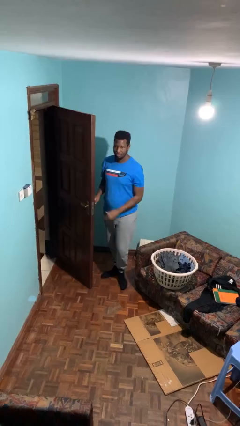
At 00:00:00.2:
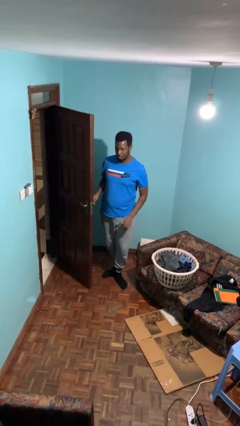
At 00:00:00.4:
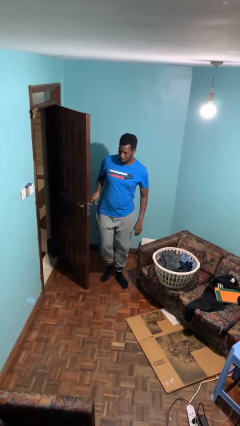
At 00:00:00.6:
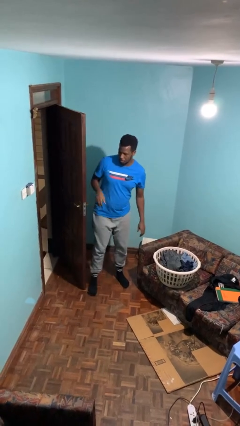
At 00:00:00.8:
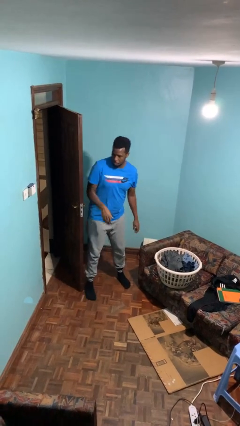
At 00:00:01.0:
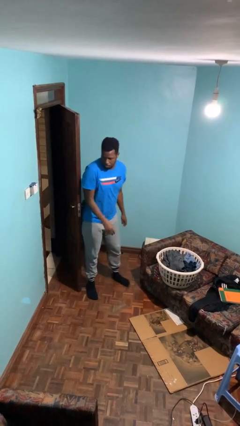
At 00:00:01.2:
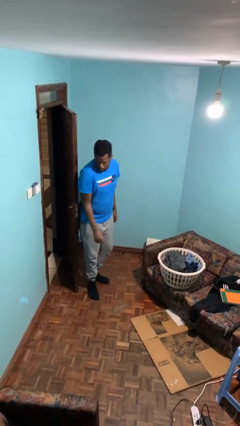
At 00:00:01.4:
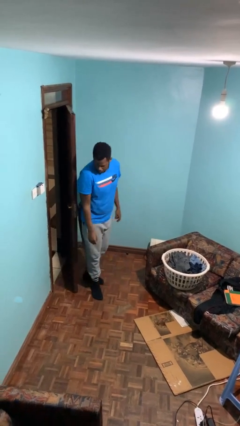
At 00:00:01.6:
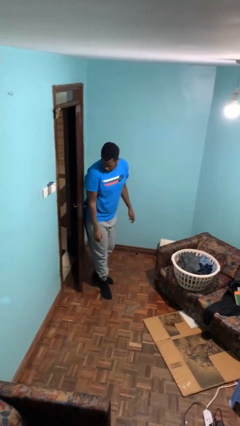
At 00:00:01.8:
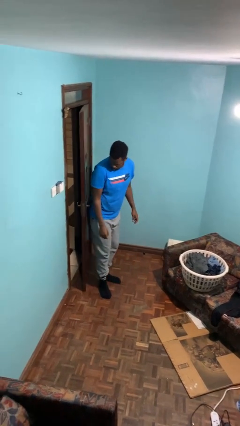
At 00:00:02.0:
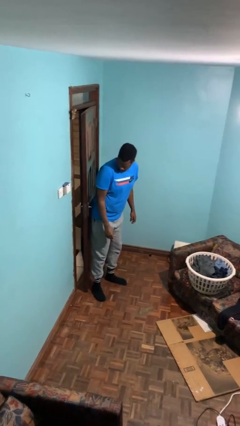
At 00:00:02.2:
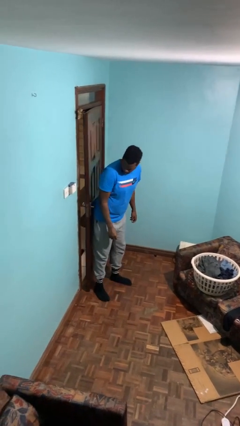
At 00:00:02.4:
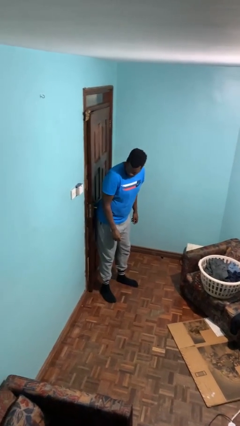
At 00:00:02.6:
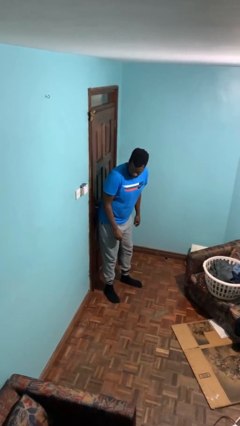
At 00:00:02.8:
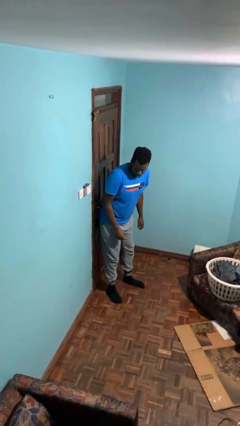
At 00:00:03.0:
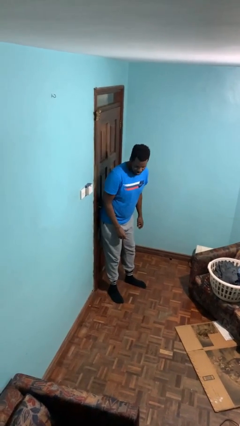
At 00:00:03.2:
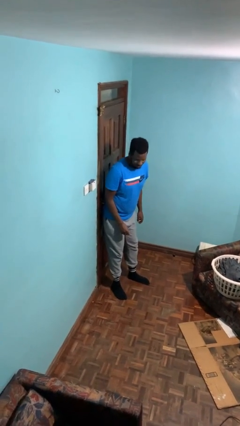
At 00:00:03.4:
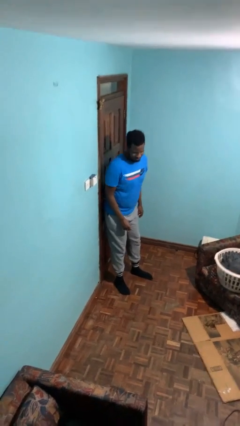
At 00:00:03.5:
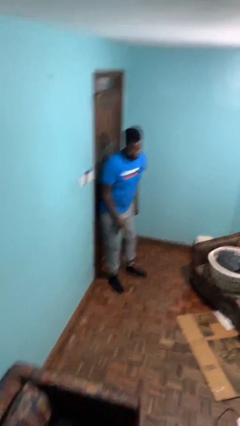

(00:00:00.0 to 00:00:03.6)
person closes door with hip

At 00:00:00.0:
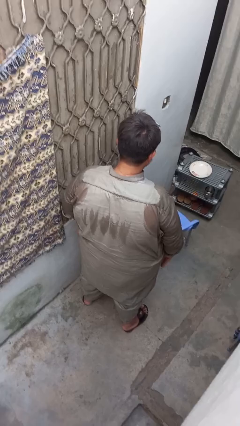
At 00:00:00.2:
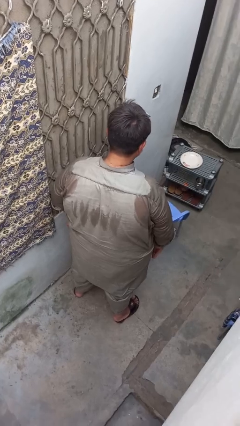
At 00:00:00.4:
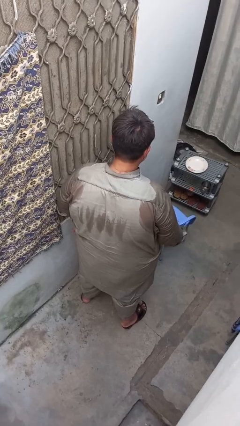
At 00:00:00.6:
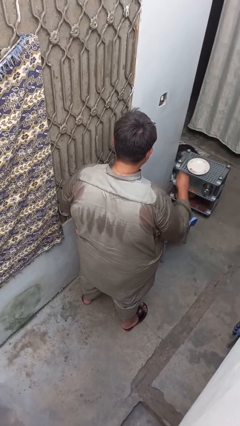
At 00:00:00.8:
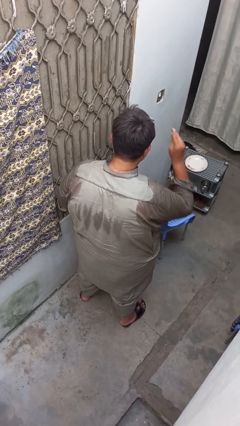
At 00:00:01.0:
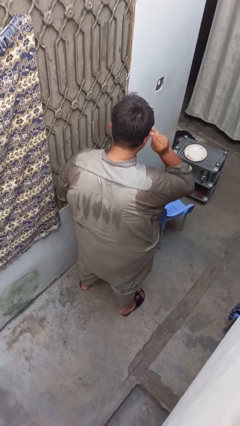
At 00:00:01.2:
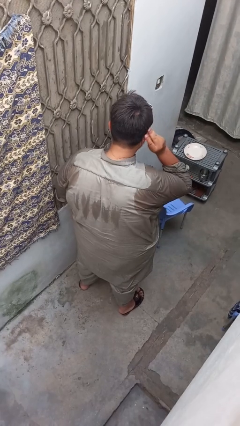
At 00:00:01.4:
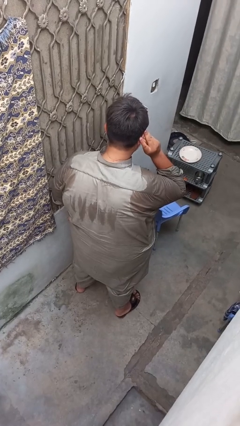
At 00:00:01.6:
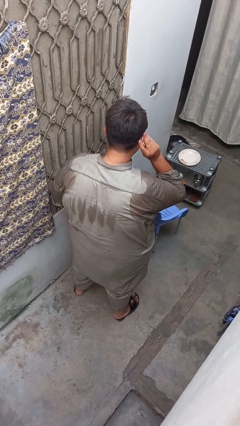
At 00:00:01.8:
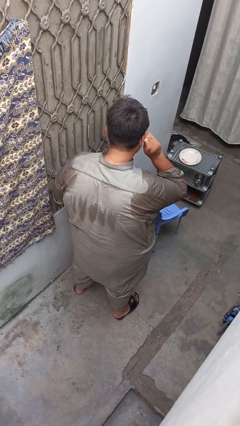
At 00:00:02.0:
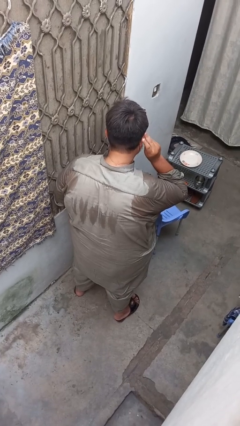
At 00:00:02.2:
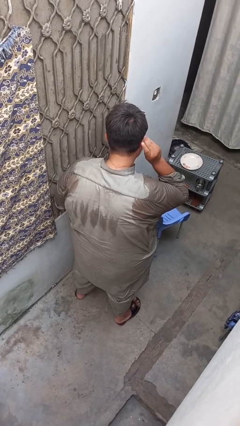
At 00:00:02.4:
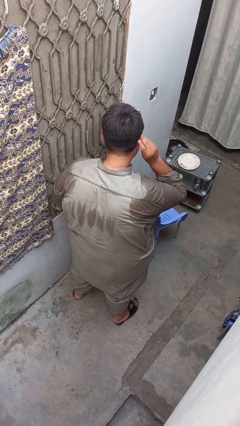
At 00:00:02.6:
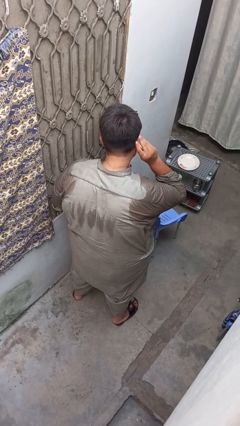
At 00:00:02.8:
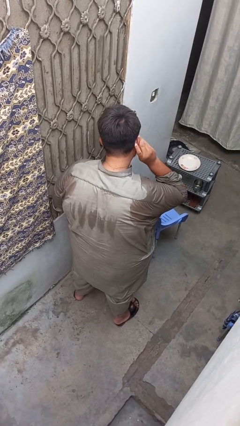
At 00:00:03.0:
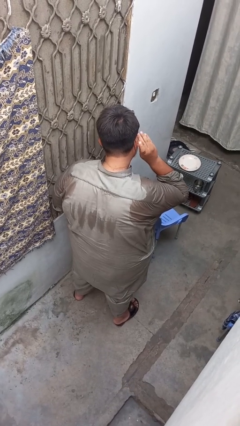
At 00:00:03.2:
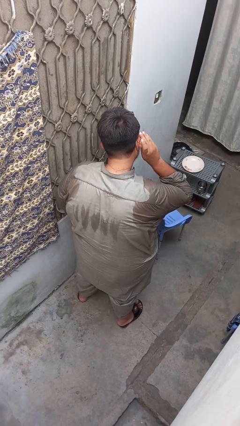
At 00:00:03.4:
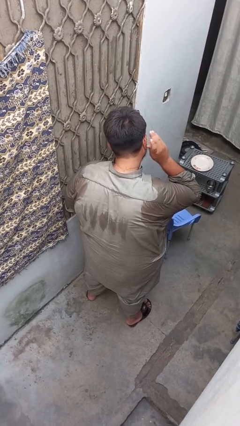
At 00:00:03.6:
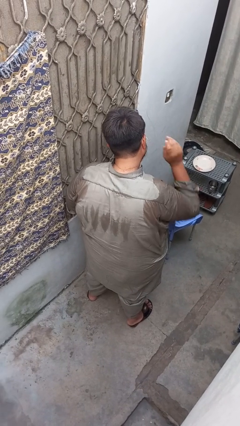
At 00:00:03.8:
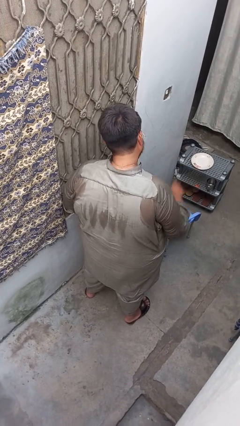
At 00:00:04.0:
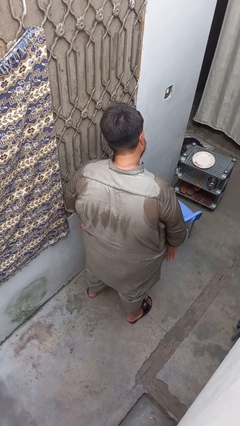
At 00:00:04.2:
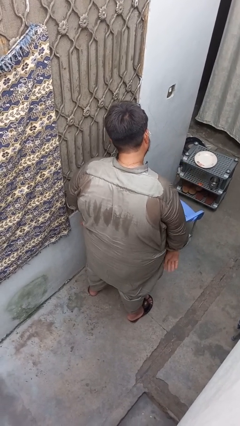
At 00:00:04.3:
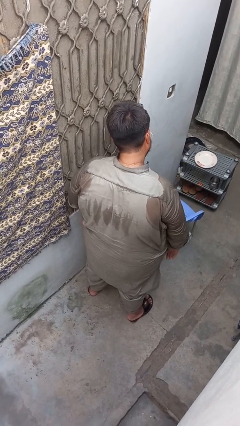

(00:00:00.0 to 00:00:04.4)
person puts on earrings

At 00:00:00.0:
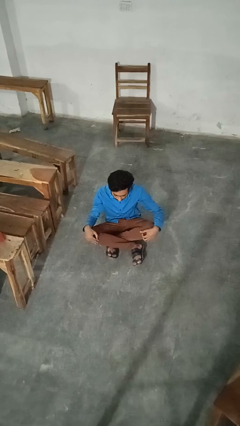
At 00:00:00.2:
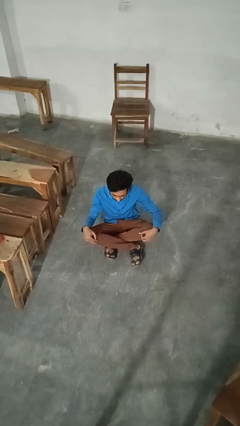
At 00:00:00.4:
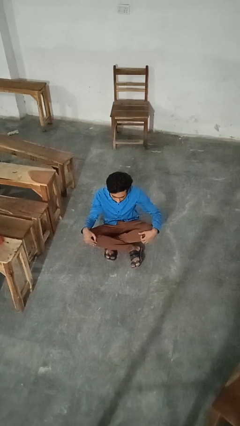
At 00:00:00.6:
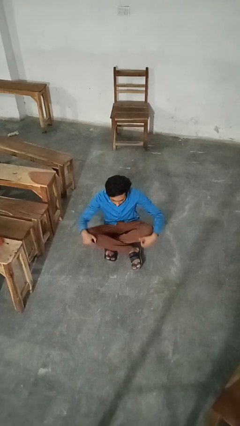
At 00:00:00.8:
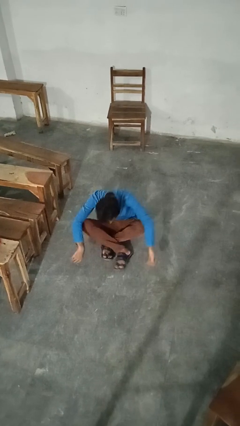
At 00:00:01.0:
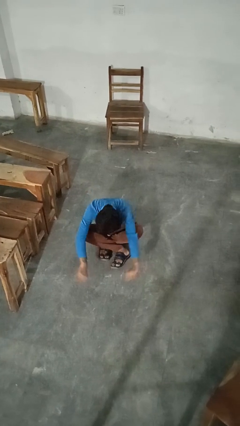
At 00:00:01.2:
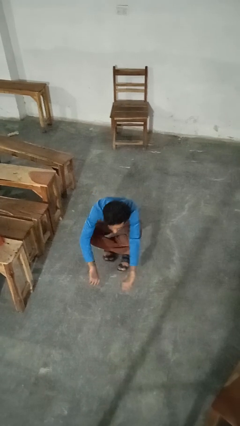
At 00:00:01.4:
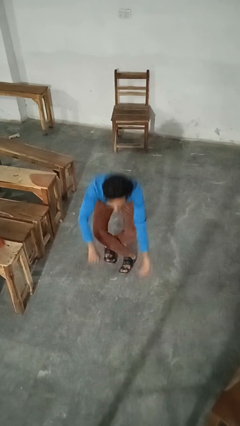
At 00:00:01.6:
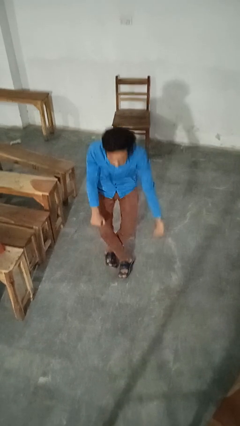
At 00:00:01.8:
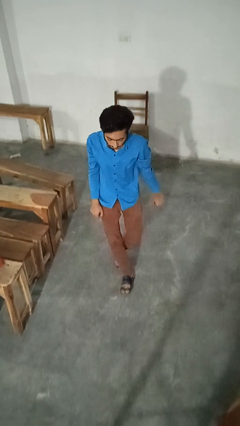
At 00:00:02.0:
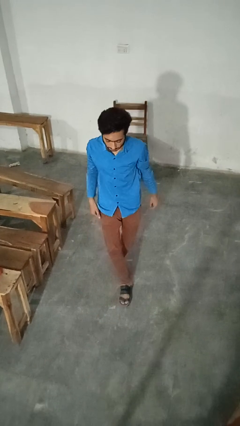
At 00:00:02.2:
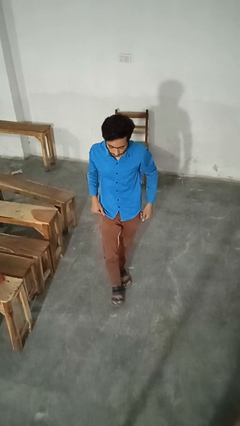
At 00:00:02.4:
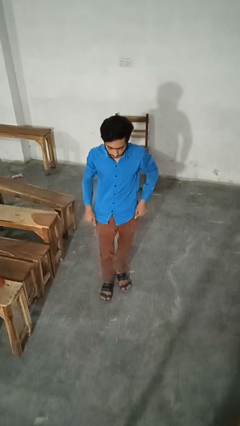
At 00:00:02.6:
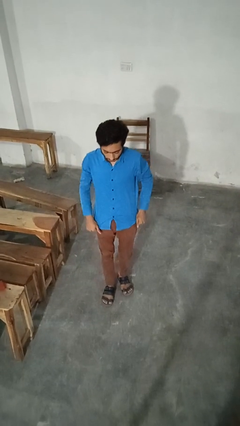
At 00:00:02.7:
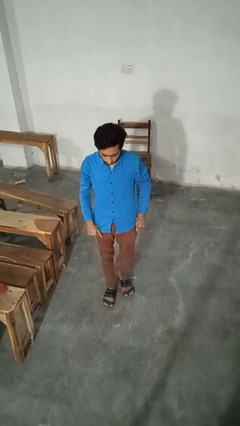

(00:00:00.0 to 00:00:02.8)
person stands up from floor

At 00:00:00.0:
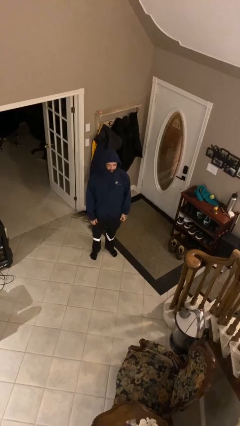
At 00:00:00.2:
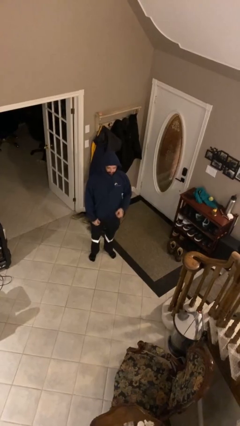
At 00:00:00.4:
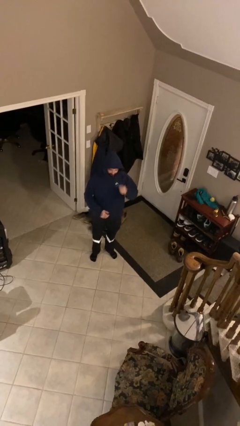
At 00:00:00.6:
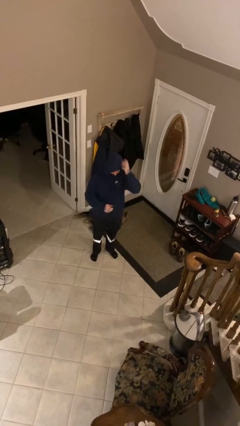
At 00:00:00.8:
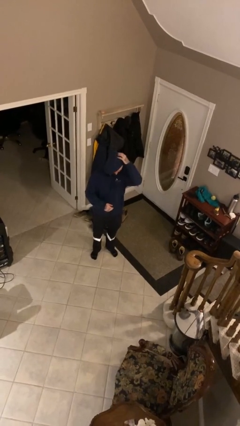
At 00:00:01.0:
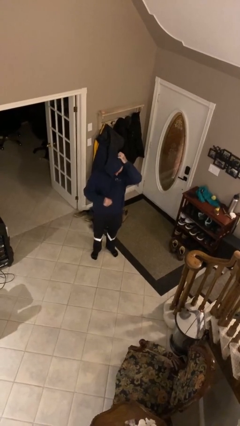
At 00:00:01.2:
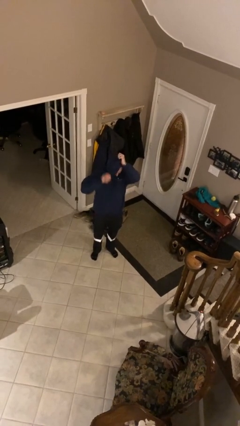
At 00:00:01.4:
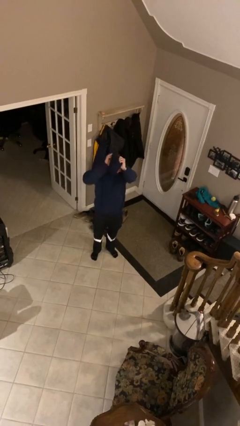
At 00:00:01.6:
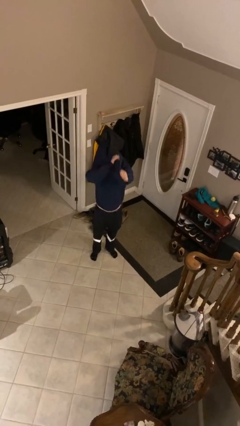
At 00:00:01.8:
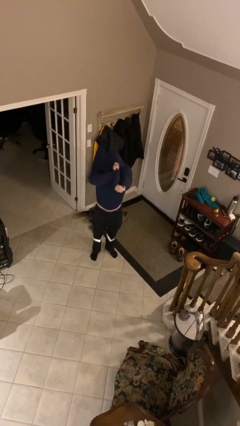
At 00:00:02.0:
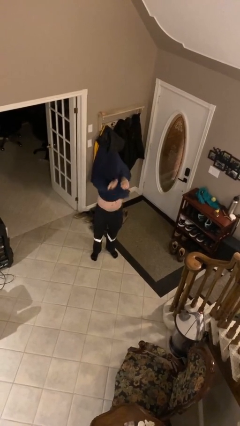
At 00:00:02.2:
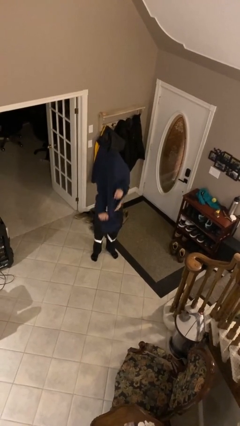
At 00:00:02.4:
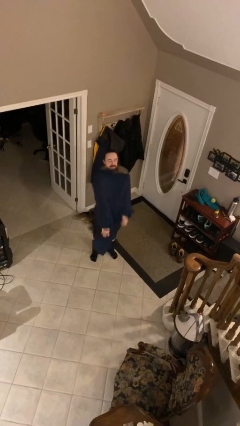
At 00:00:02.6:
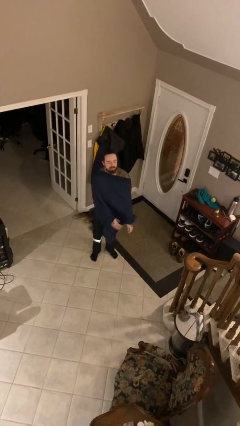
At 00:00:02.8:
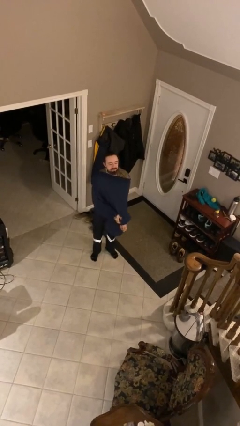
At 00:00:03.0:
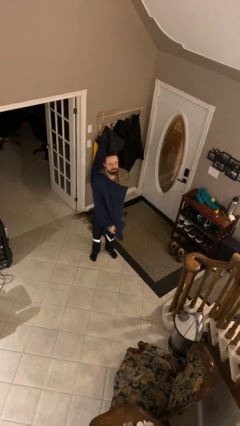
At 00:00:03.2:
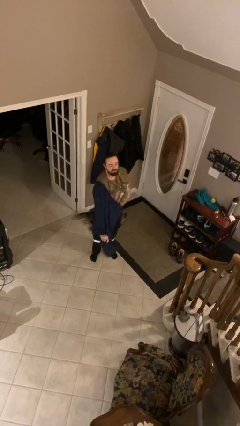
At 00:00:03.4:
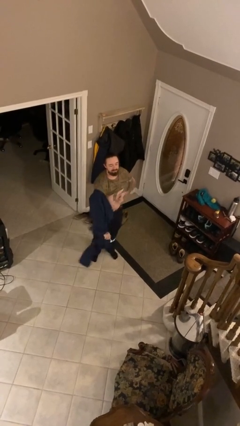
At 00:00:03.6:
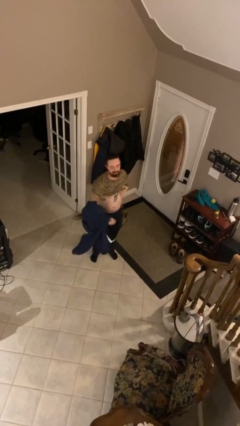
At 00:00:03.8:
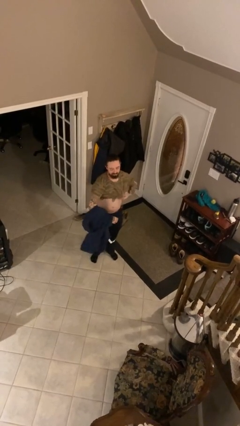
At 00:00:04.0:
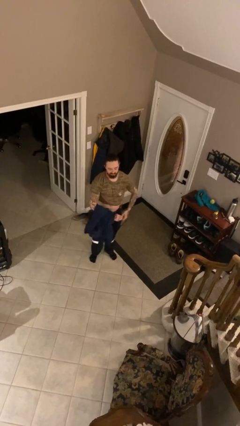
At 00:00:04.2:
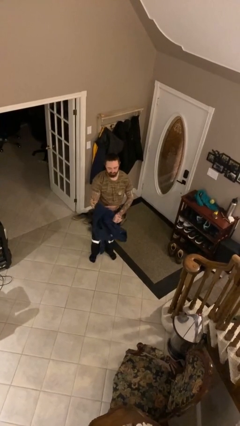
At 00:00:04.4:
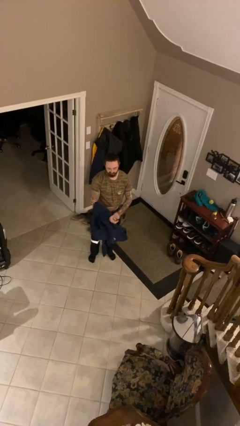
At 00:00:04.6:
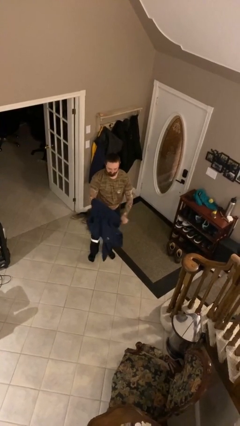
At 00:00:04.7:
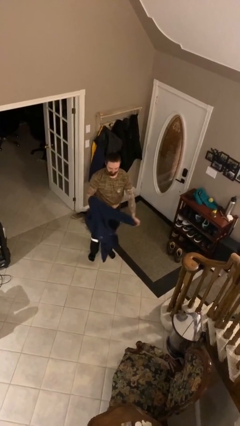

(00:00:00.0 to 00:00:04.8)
person takes off hoodie

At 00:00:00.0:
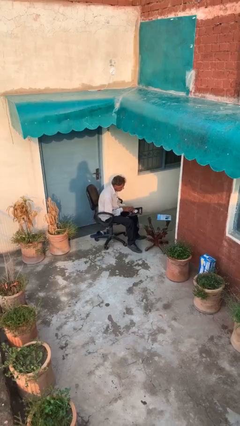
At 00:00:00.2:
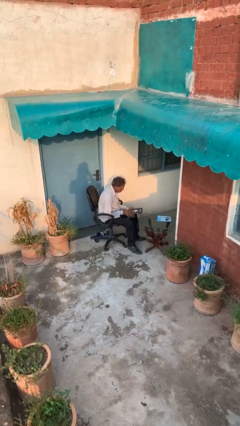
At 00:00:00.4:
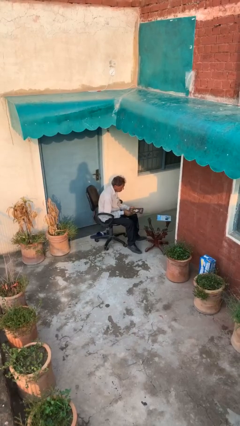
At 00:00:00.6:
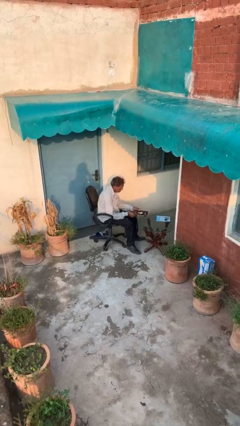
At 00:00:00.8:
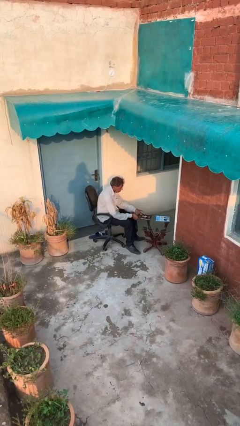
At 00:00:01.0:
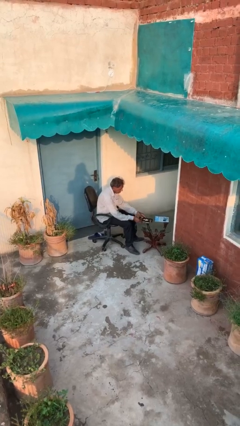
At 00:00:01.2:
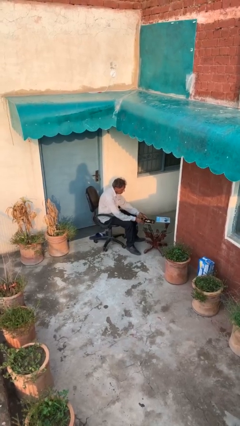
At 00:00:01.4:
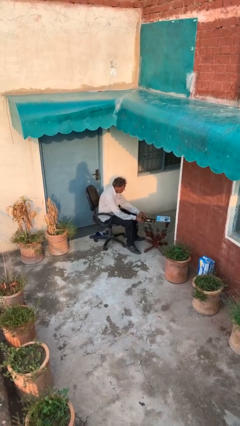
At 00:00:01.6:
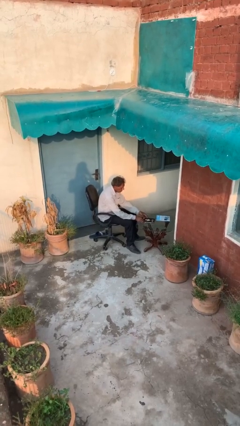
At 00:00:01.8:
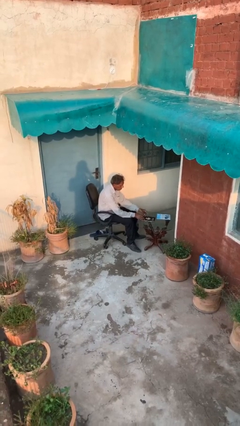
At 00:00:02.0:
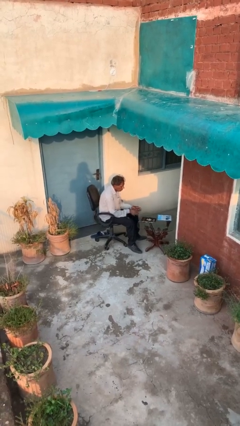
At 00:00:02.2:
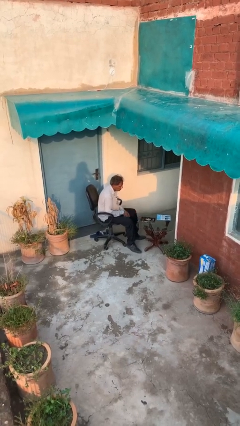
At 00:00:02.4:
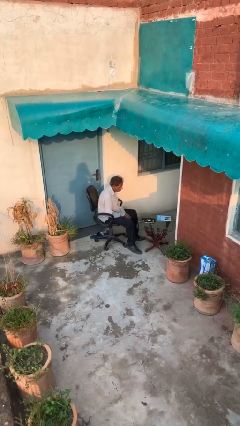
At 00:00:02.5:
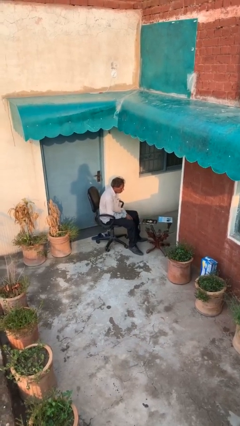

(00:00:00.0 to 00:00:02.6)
person puts down object on table
